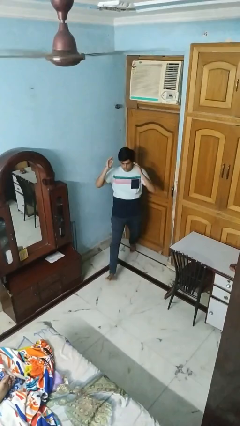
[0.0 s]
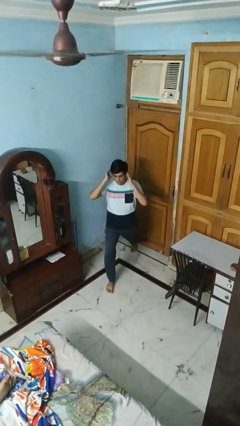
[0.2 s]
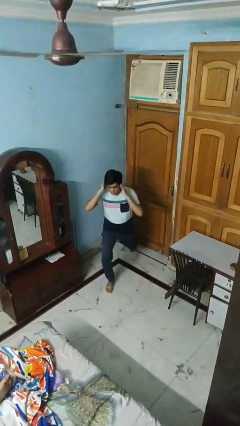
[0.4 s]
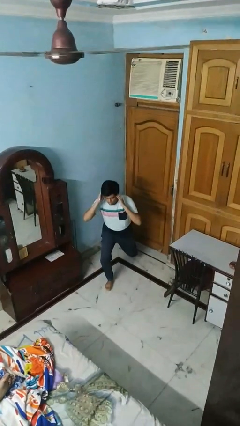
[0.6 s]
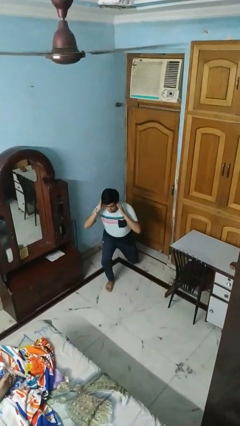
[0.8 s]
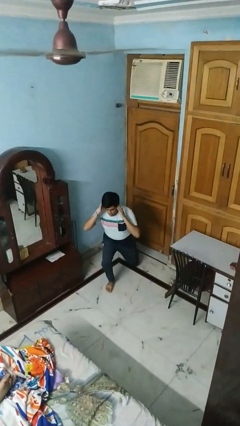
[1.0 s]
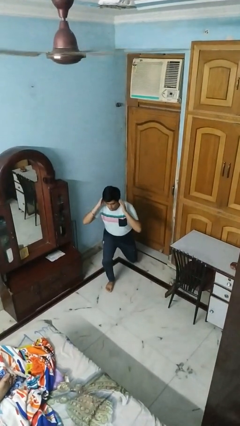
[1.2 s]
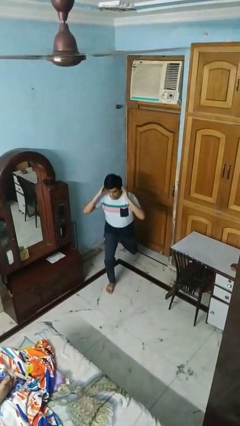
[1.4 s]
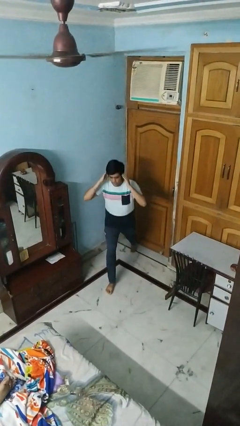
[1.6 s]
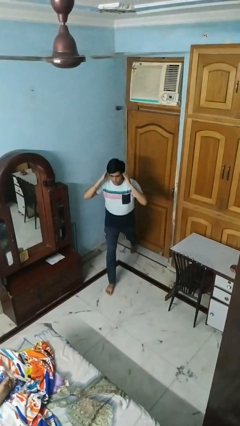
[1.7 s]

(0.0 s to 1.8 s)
person exercises with lunges

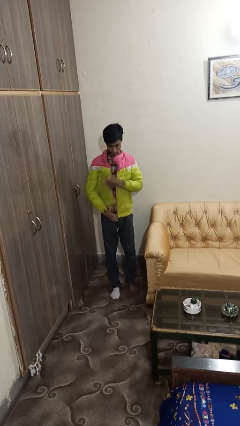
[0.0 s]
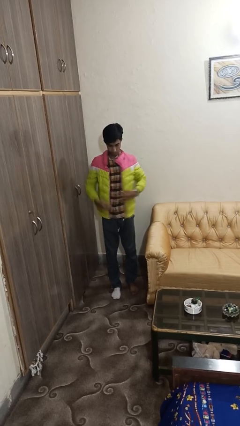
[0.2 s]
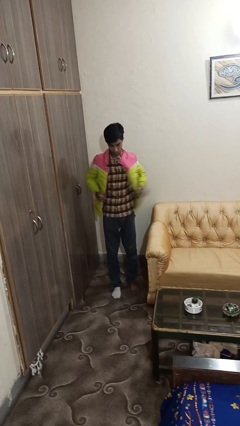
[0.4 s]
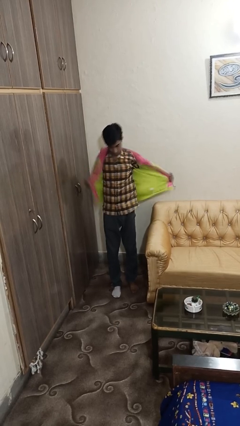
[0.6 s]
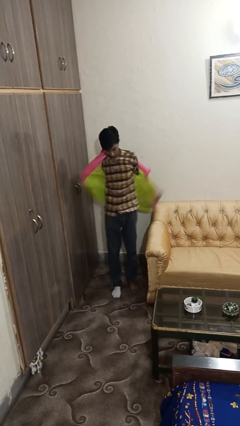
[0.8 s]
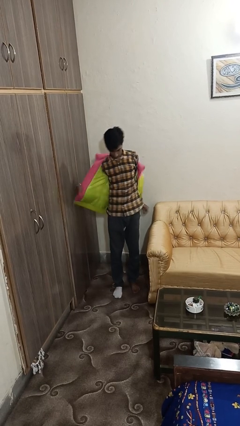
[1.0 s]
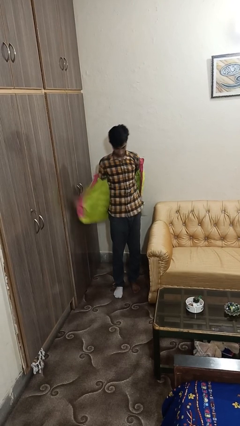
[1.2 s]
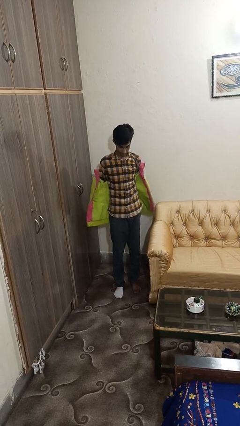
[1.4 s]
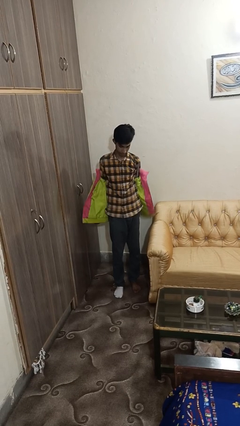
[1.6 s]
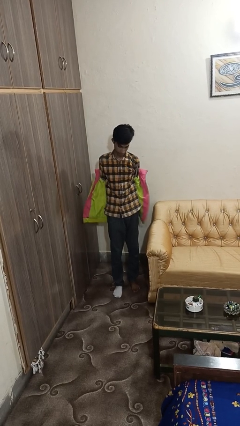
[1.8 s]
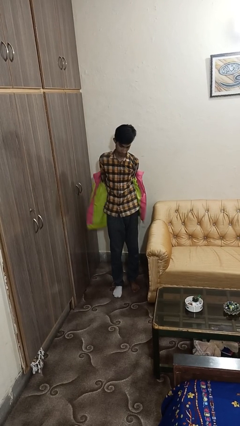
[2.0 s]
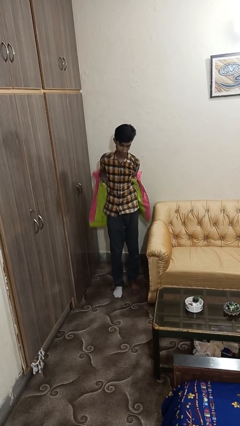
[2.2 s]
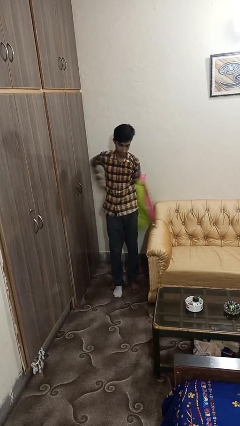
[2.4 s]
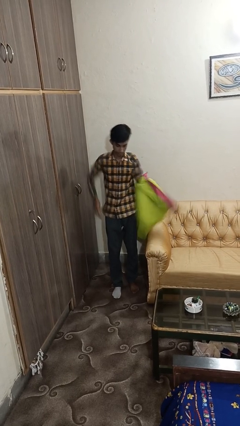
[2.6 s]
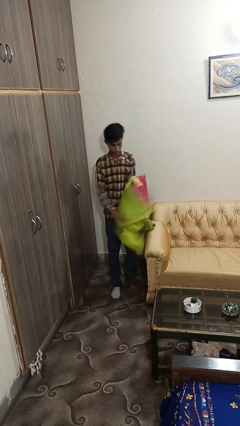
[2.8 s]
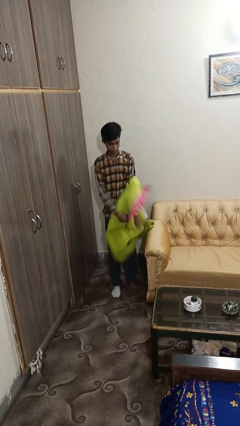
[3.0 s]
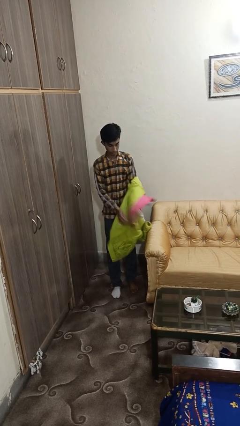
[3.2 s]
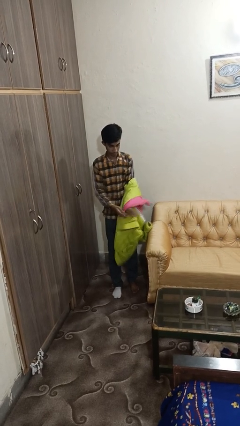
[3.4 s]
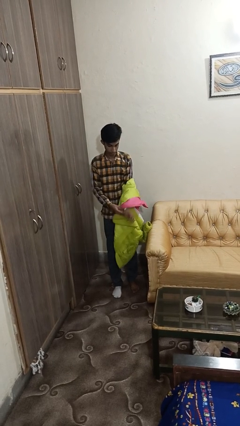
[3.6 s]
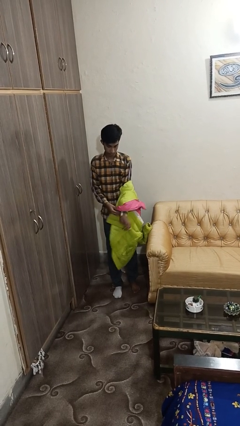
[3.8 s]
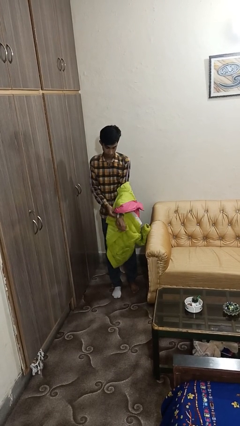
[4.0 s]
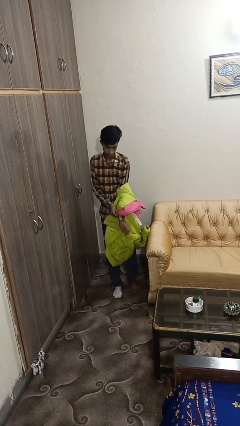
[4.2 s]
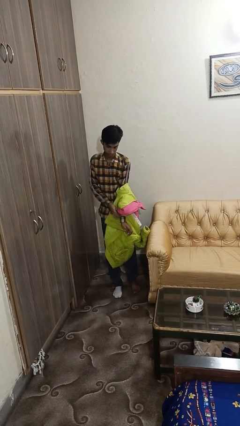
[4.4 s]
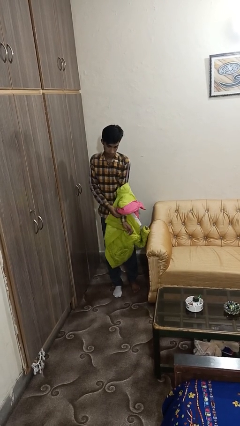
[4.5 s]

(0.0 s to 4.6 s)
person takes off jacket

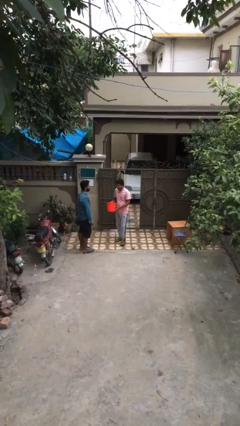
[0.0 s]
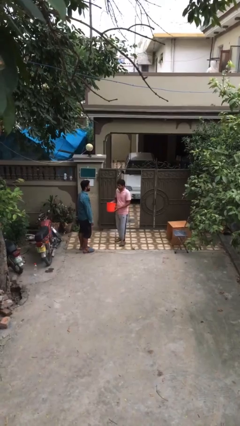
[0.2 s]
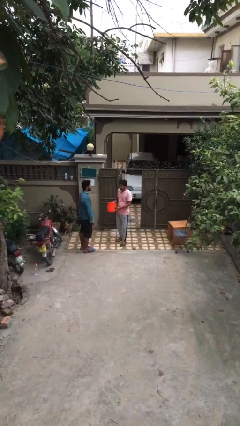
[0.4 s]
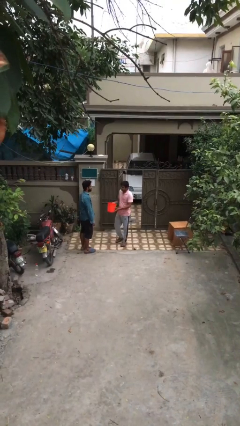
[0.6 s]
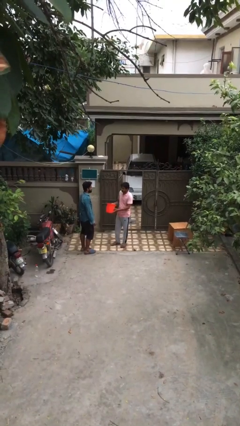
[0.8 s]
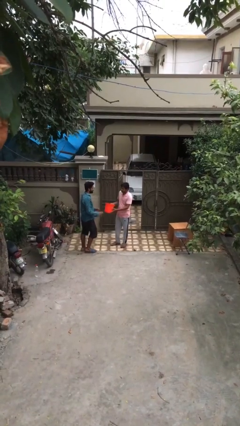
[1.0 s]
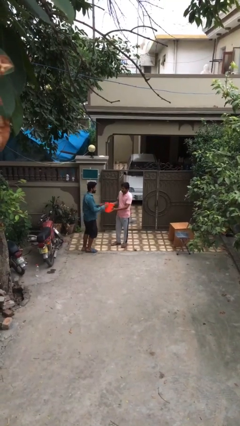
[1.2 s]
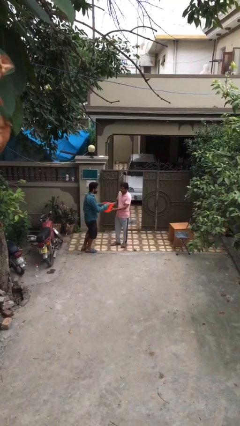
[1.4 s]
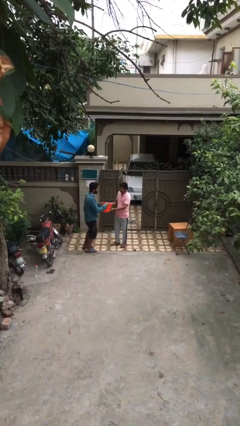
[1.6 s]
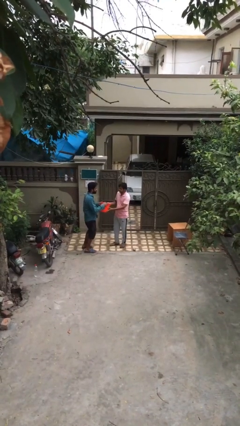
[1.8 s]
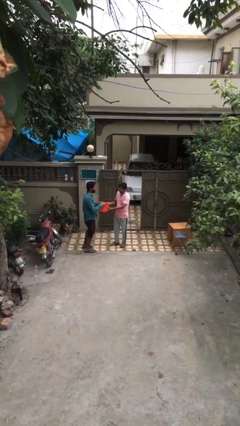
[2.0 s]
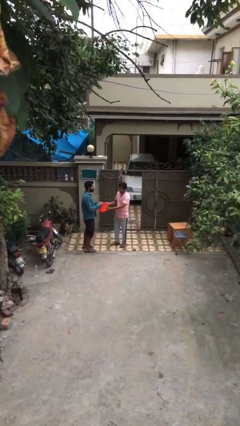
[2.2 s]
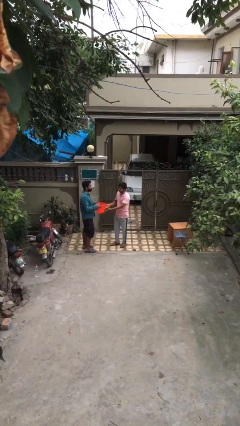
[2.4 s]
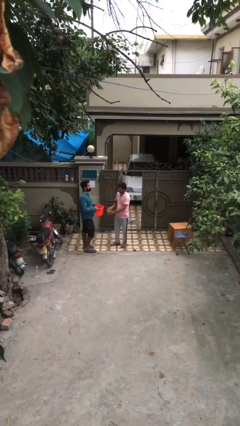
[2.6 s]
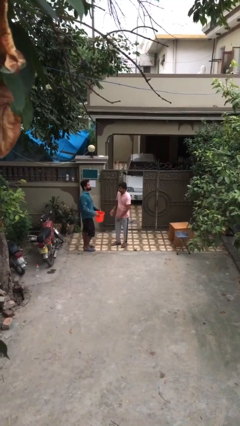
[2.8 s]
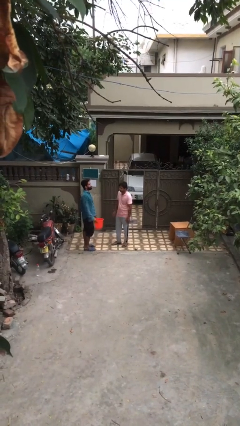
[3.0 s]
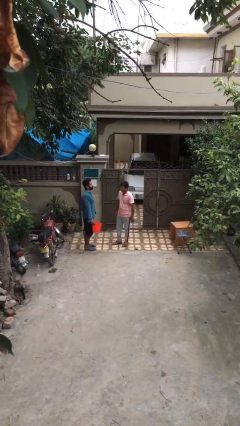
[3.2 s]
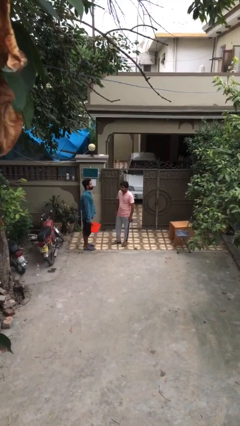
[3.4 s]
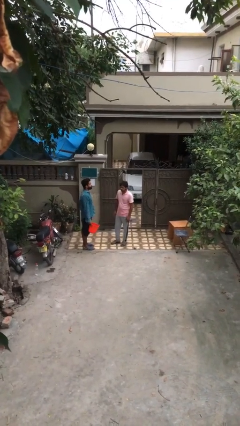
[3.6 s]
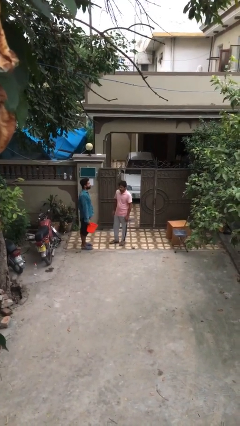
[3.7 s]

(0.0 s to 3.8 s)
person transfers object to person

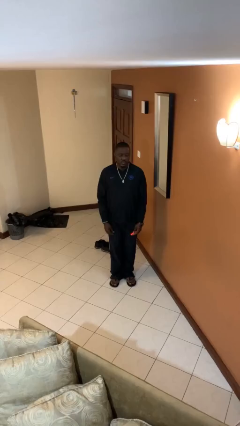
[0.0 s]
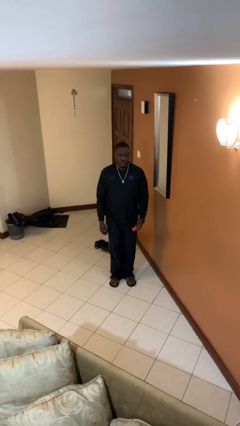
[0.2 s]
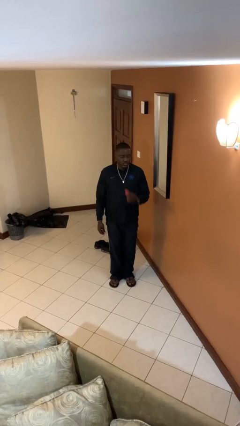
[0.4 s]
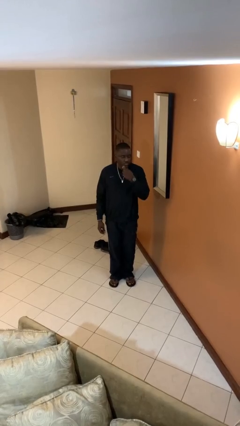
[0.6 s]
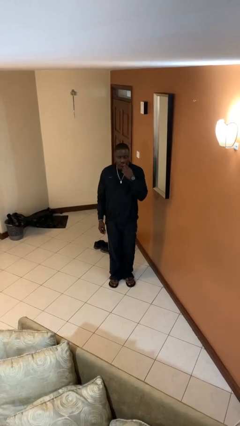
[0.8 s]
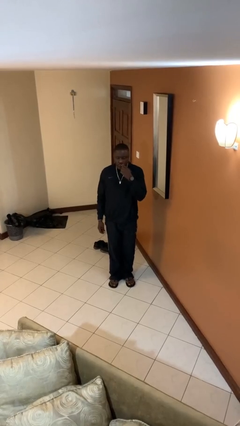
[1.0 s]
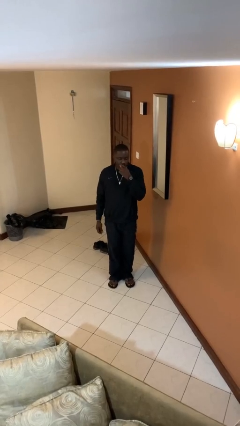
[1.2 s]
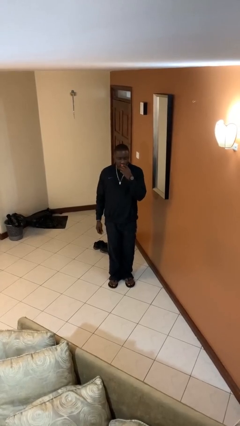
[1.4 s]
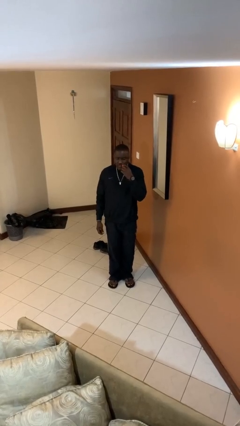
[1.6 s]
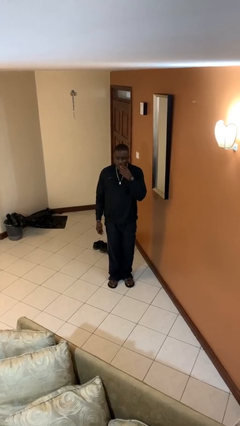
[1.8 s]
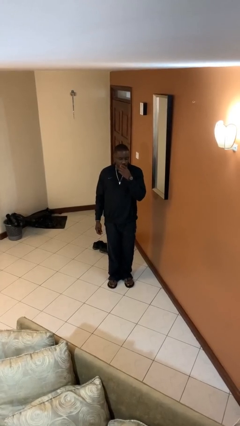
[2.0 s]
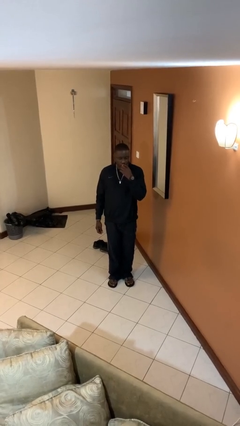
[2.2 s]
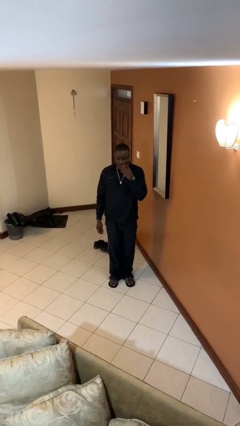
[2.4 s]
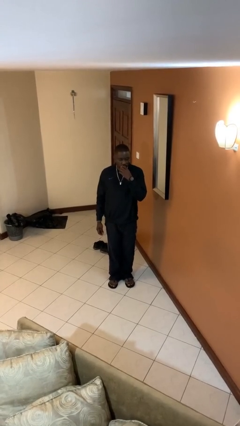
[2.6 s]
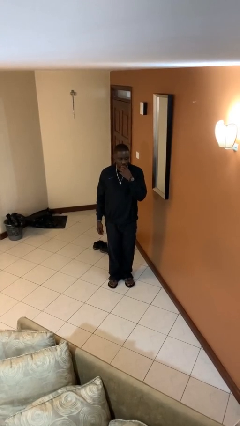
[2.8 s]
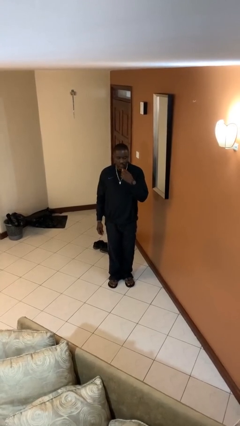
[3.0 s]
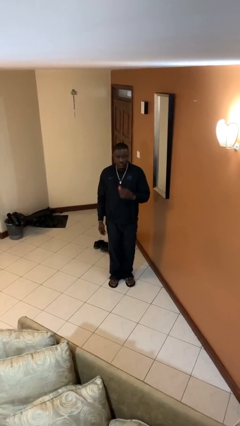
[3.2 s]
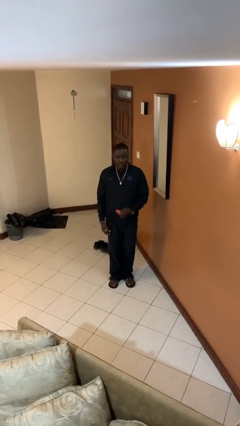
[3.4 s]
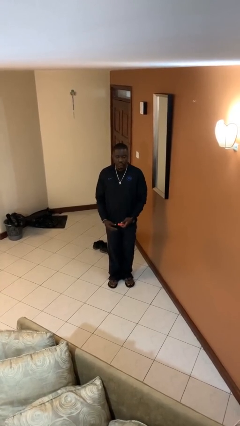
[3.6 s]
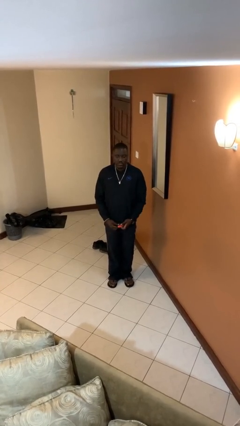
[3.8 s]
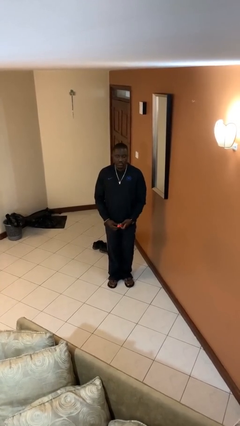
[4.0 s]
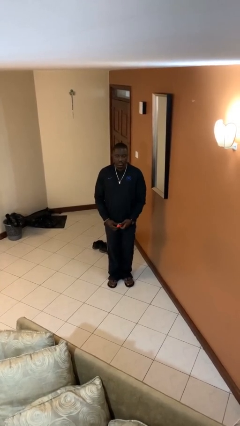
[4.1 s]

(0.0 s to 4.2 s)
person applies lip makeup

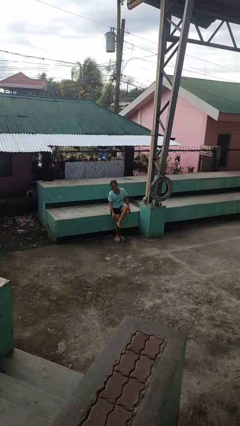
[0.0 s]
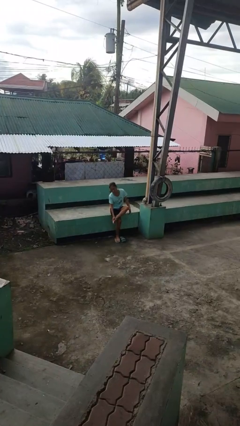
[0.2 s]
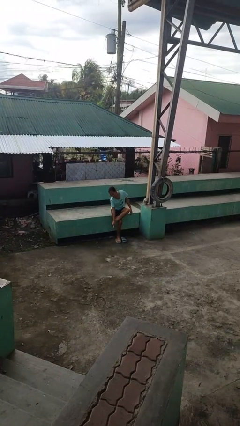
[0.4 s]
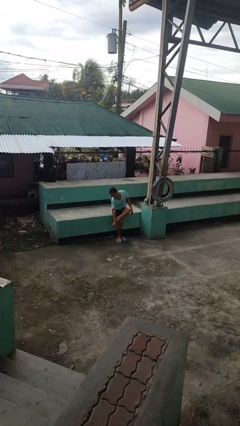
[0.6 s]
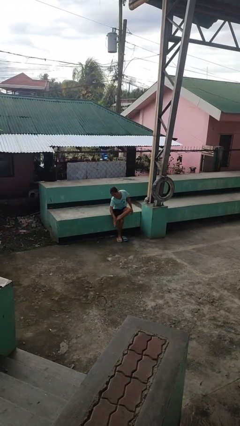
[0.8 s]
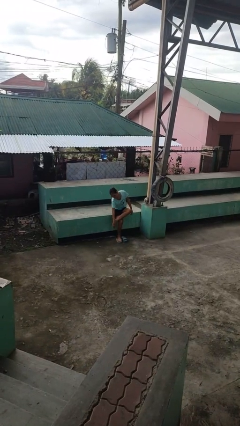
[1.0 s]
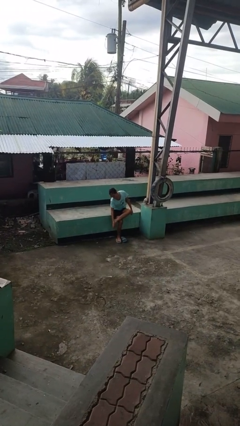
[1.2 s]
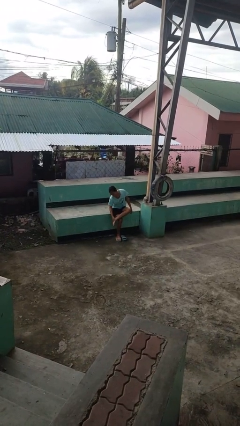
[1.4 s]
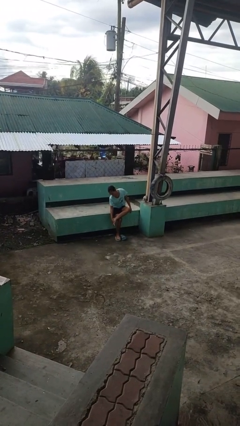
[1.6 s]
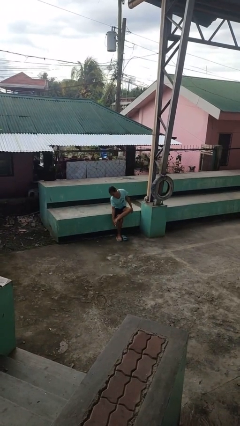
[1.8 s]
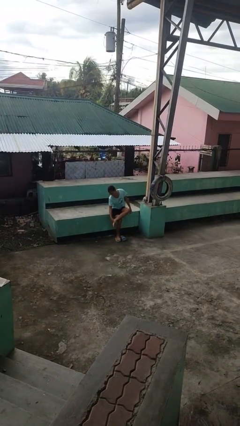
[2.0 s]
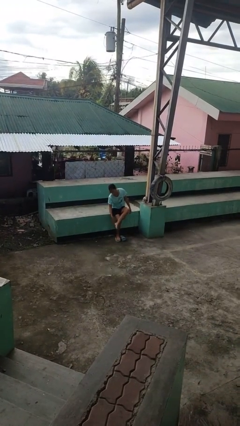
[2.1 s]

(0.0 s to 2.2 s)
person rubs foot

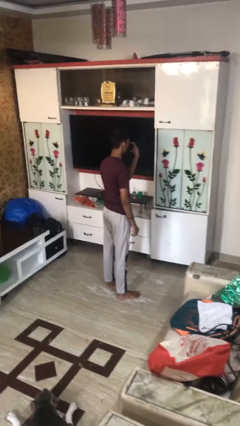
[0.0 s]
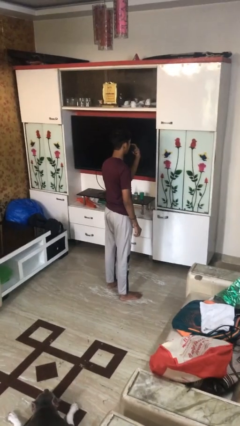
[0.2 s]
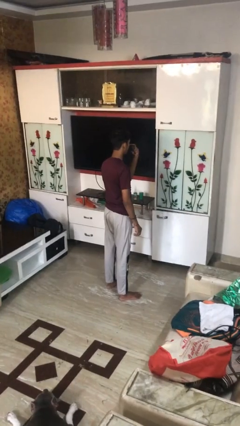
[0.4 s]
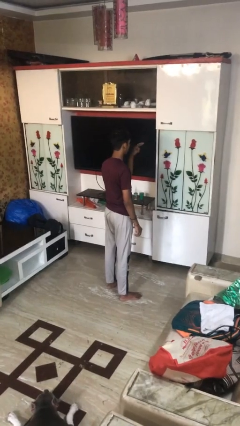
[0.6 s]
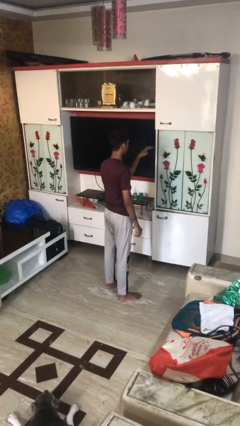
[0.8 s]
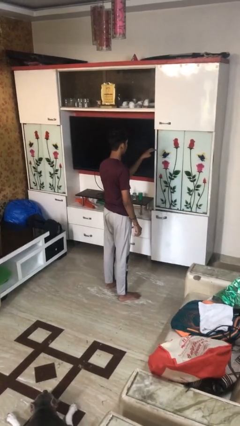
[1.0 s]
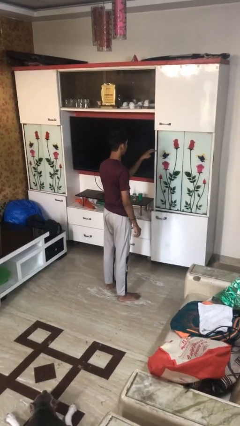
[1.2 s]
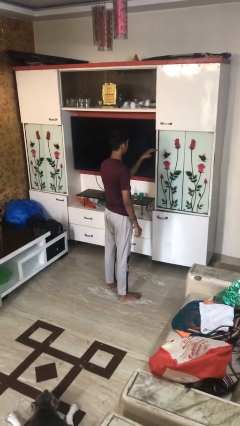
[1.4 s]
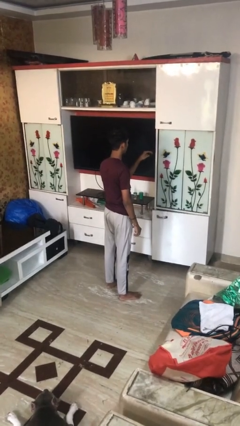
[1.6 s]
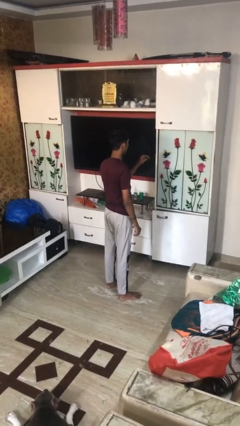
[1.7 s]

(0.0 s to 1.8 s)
person gestures watch closely
